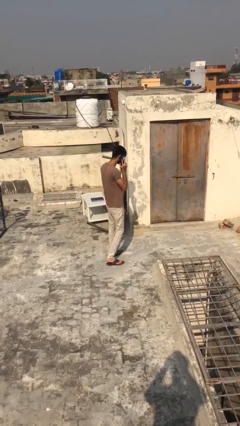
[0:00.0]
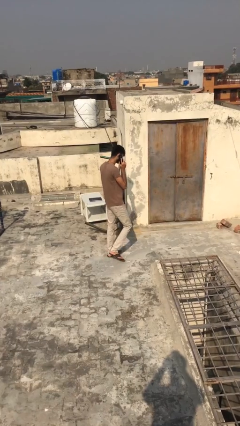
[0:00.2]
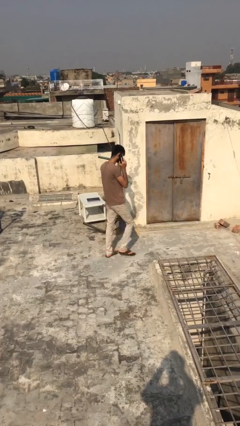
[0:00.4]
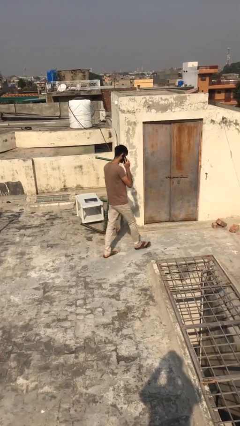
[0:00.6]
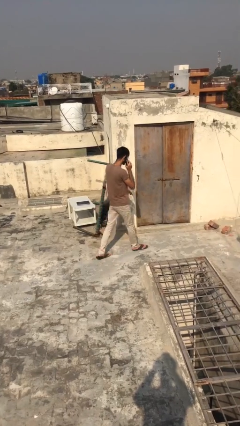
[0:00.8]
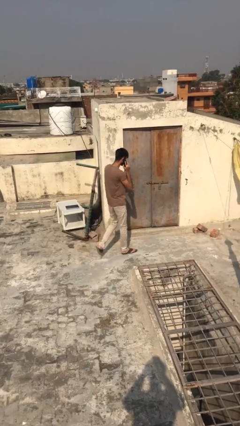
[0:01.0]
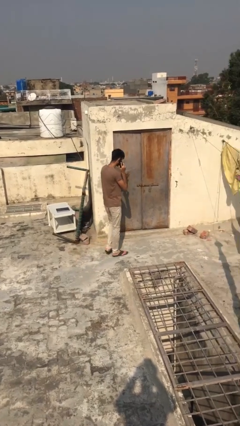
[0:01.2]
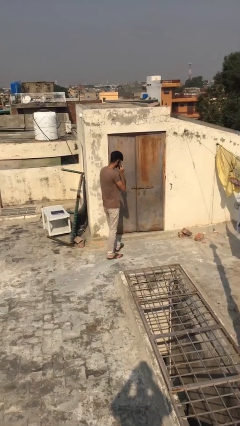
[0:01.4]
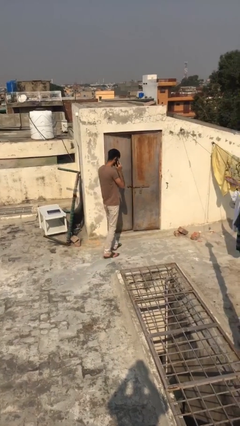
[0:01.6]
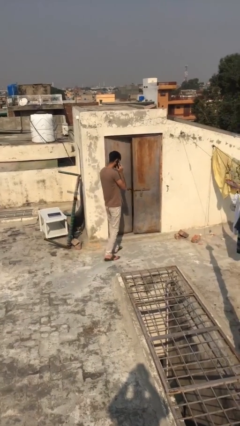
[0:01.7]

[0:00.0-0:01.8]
person opens facility door

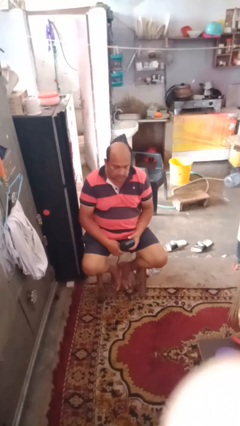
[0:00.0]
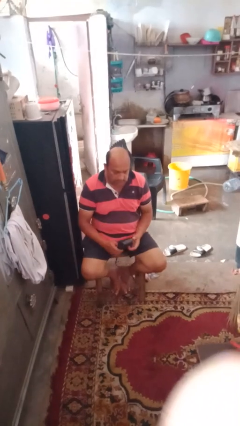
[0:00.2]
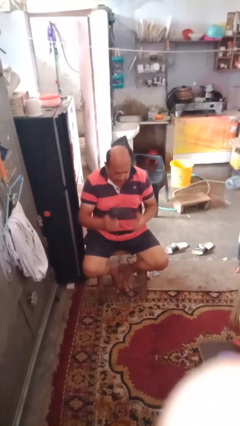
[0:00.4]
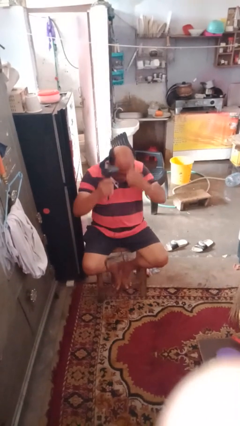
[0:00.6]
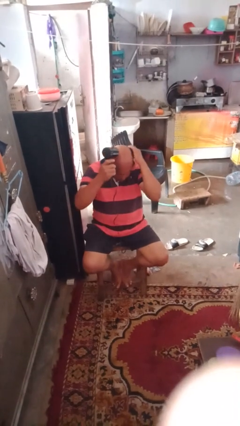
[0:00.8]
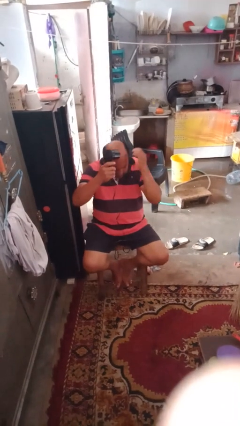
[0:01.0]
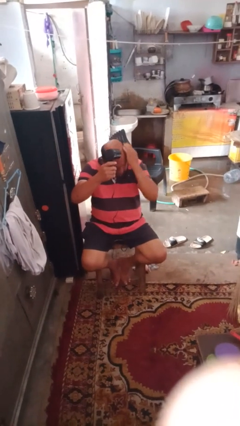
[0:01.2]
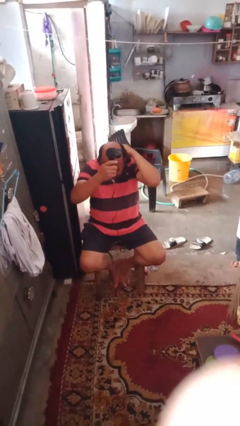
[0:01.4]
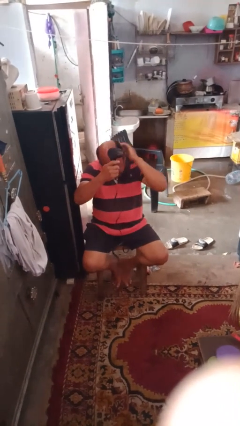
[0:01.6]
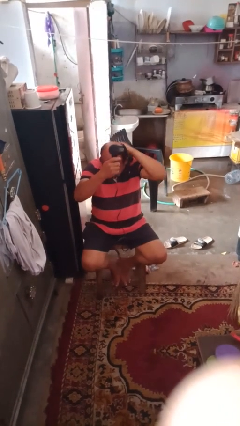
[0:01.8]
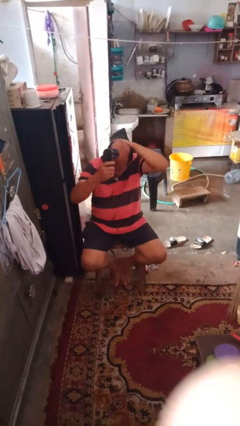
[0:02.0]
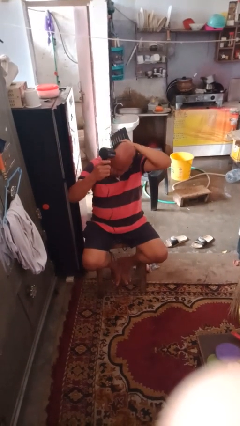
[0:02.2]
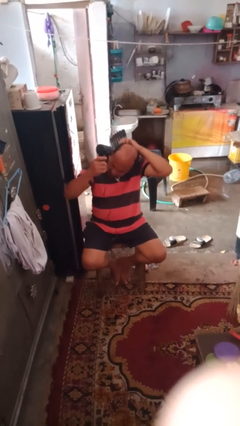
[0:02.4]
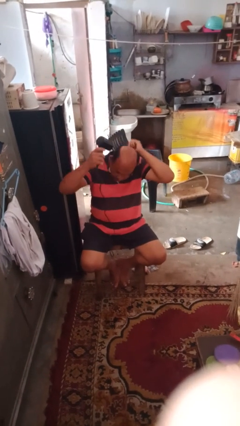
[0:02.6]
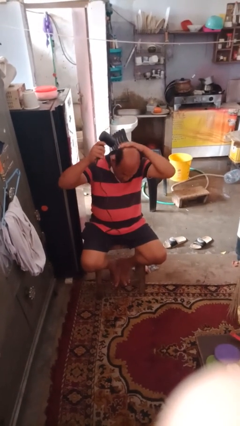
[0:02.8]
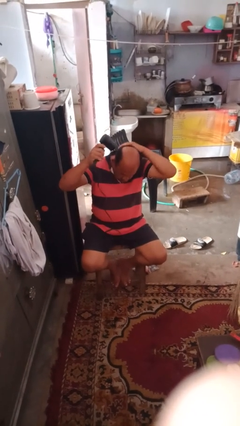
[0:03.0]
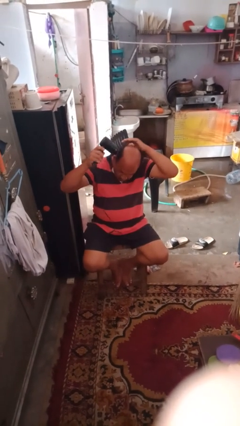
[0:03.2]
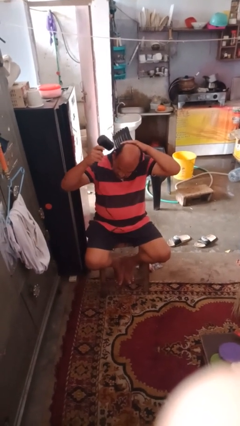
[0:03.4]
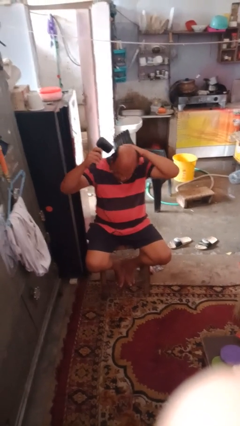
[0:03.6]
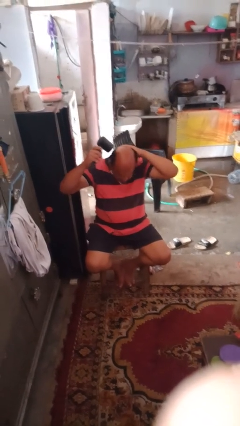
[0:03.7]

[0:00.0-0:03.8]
person dries hair with hairdryer

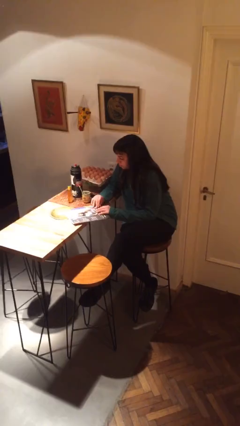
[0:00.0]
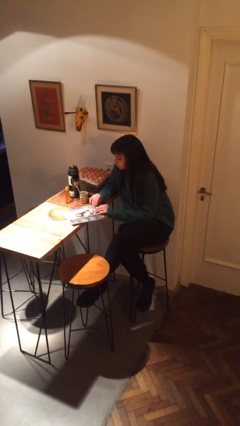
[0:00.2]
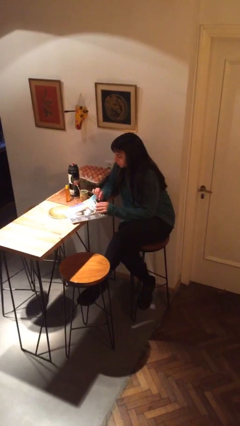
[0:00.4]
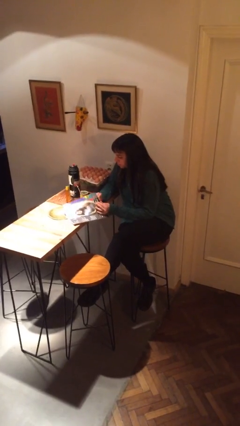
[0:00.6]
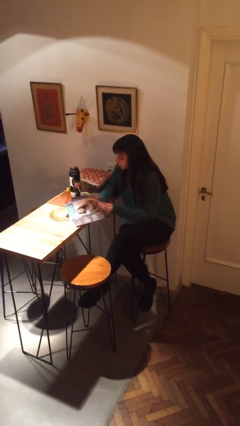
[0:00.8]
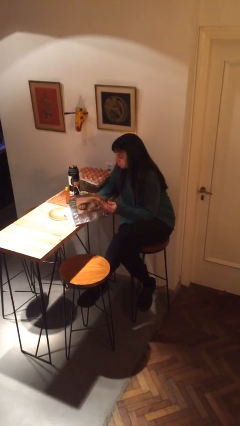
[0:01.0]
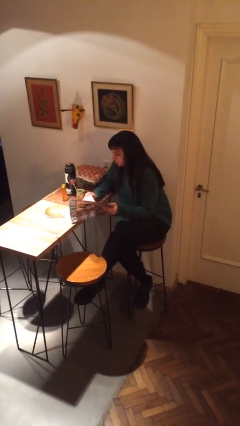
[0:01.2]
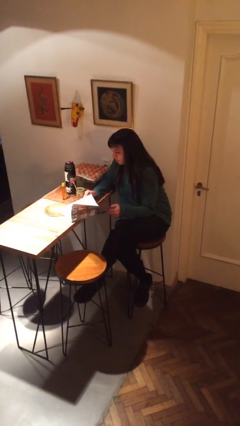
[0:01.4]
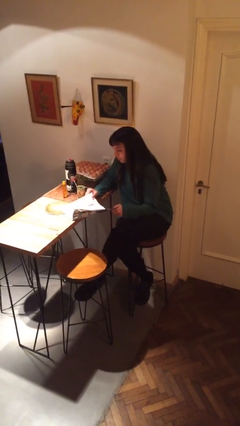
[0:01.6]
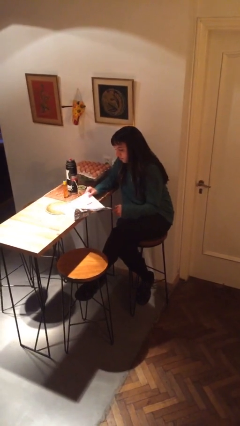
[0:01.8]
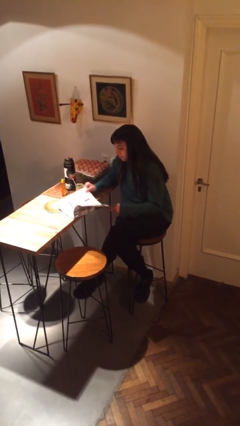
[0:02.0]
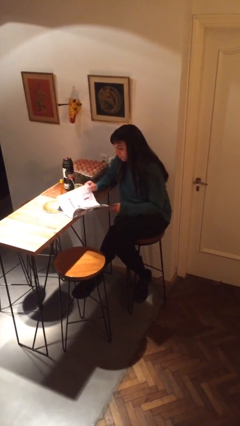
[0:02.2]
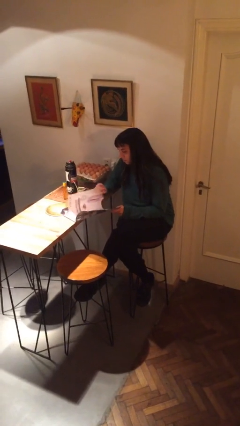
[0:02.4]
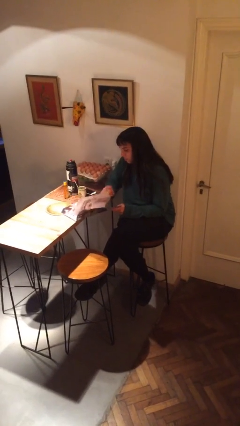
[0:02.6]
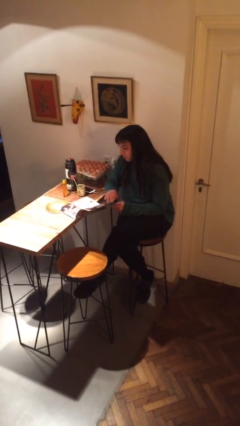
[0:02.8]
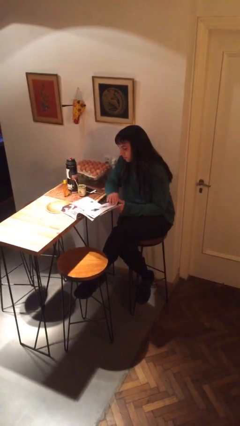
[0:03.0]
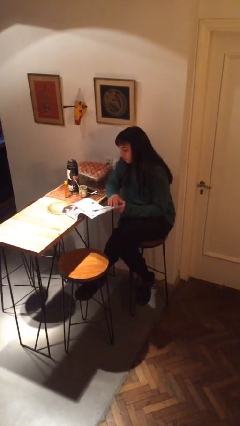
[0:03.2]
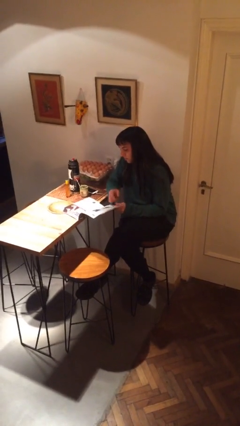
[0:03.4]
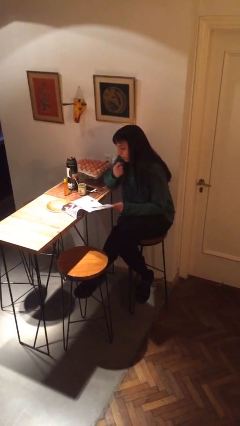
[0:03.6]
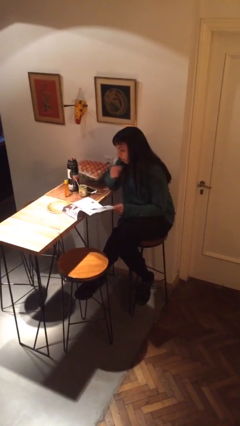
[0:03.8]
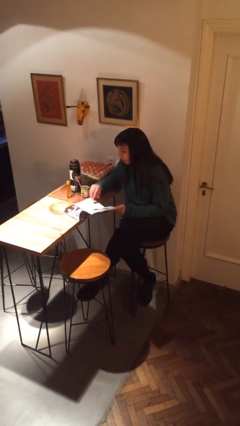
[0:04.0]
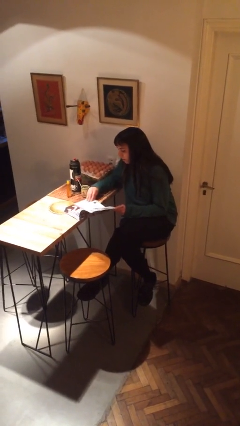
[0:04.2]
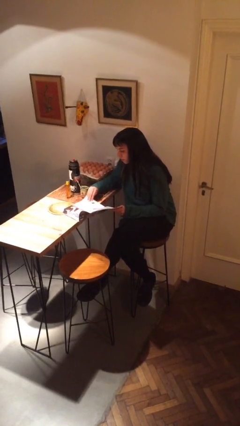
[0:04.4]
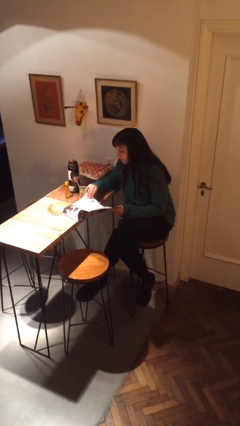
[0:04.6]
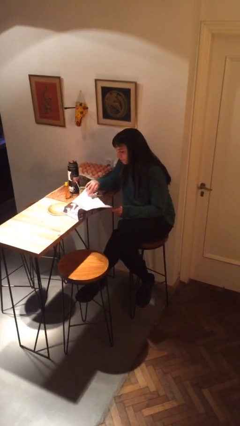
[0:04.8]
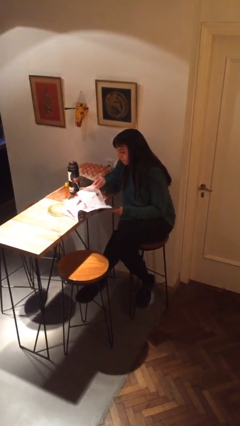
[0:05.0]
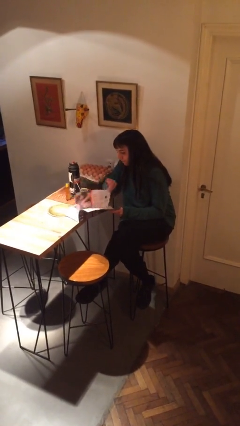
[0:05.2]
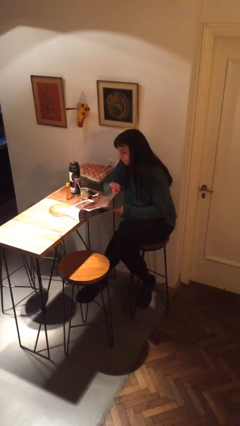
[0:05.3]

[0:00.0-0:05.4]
person reads magazine

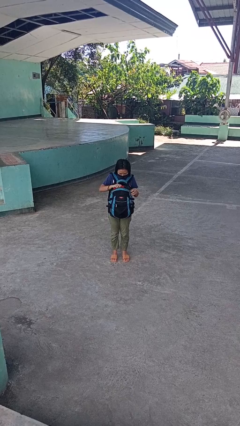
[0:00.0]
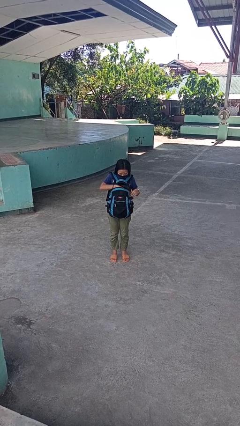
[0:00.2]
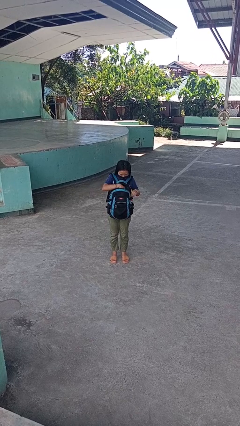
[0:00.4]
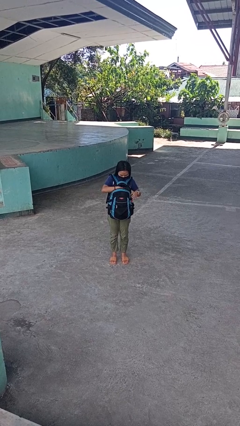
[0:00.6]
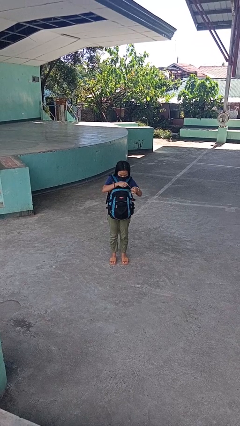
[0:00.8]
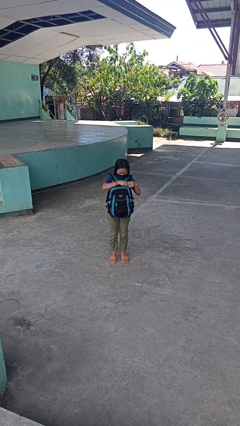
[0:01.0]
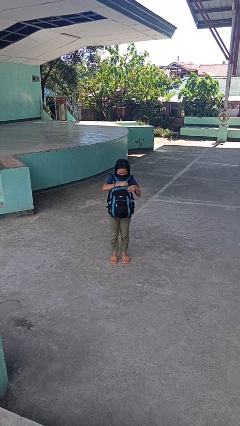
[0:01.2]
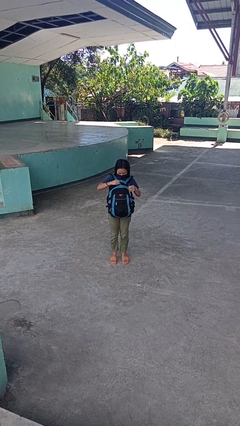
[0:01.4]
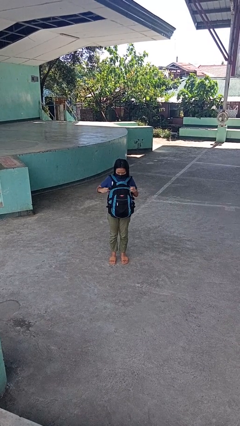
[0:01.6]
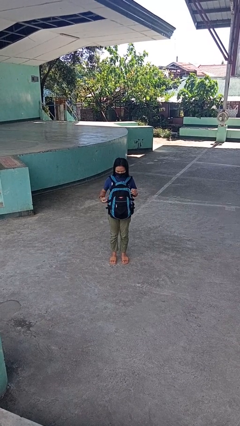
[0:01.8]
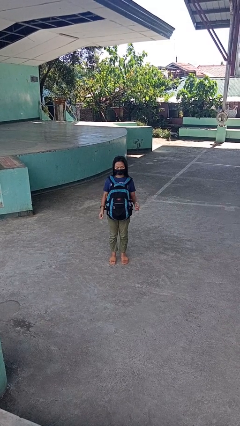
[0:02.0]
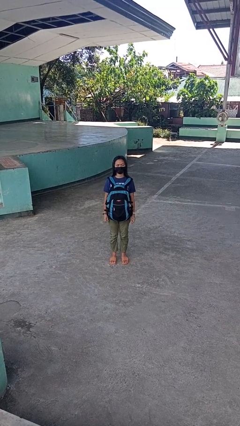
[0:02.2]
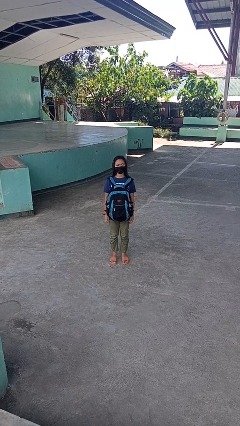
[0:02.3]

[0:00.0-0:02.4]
person puts object into backpack

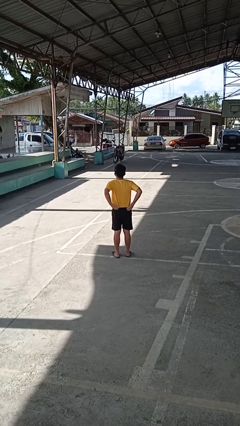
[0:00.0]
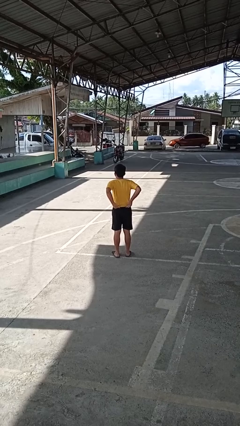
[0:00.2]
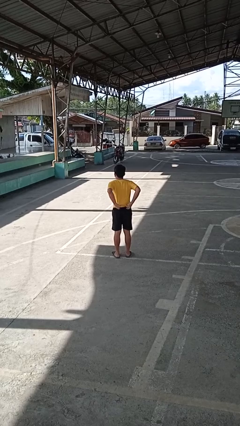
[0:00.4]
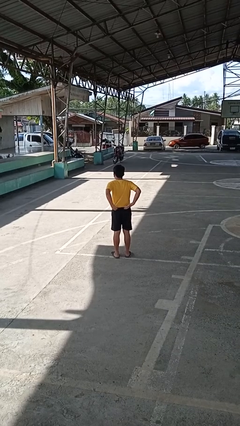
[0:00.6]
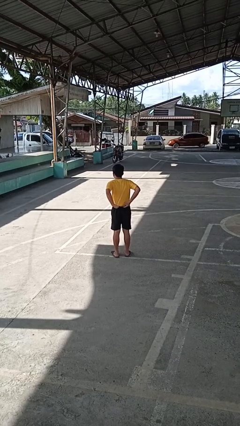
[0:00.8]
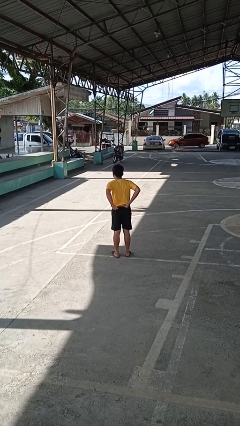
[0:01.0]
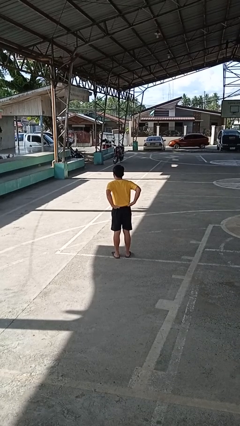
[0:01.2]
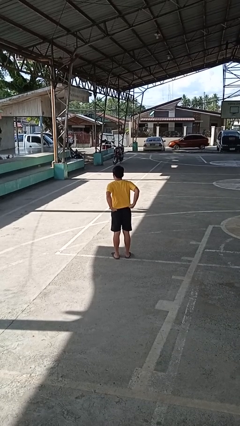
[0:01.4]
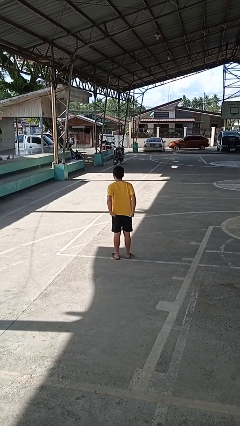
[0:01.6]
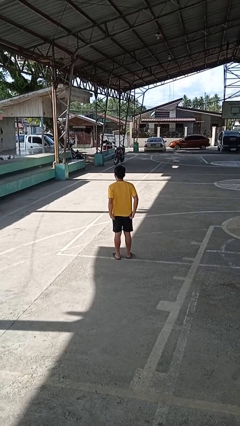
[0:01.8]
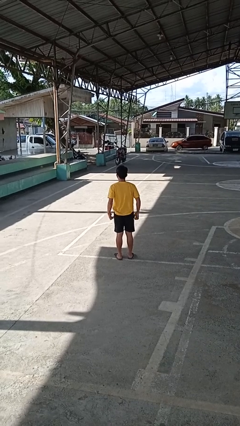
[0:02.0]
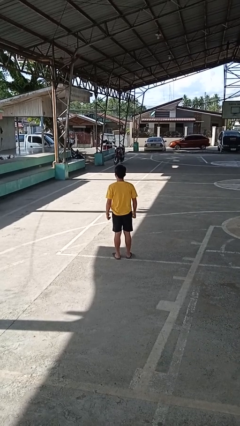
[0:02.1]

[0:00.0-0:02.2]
person untucks shirt

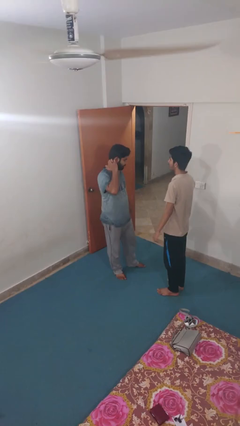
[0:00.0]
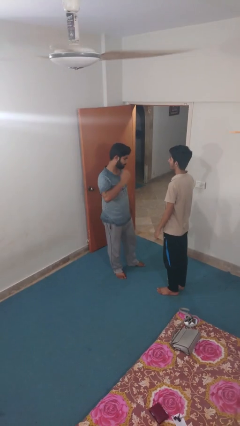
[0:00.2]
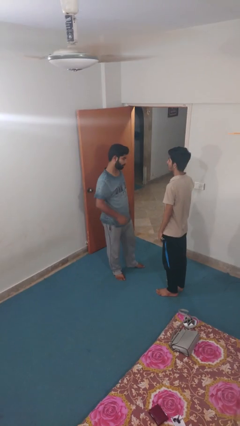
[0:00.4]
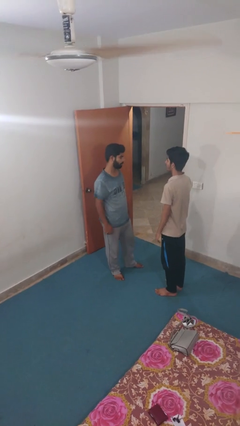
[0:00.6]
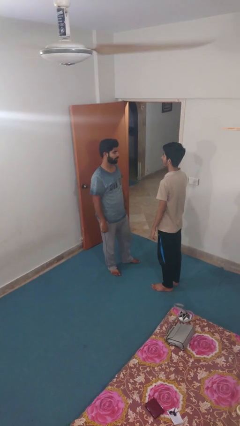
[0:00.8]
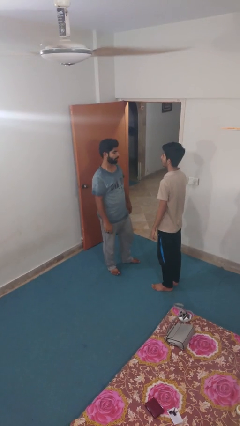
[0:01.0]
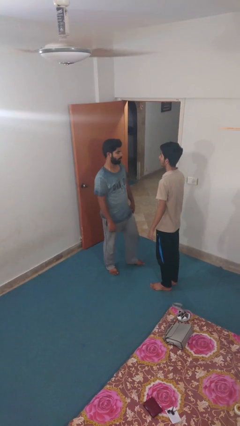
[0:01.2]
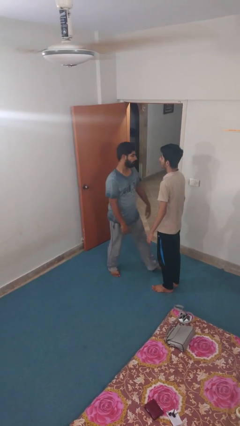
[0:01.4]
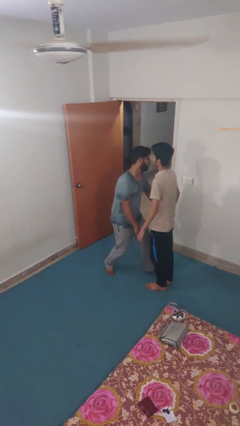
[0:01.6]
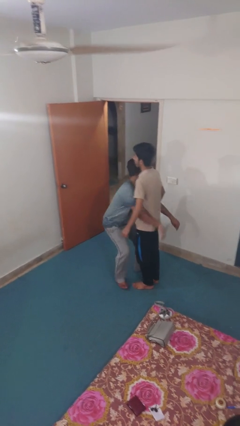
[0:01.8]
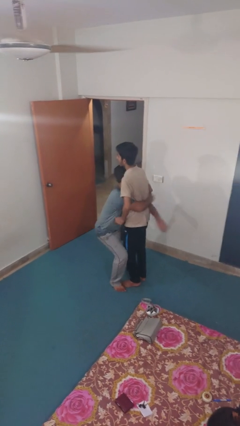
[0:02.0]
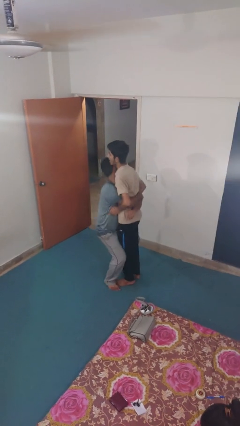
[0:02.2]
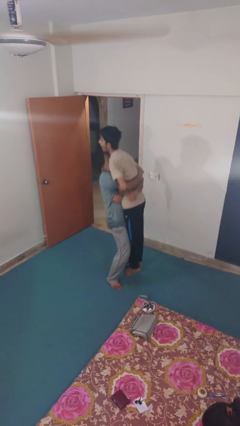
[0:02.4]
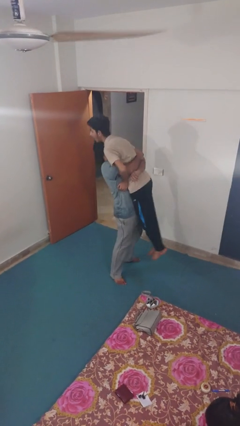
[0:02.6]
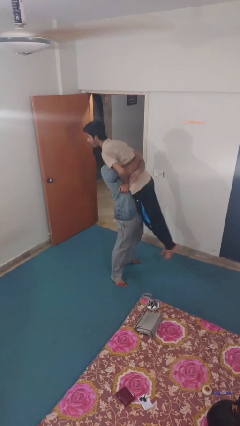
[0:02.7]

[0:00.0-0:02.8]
person picks up person
